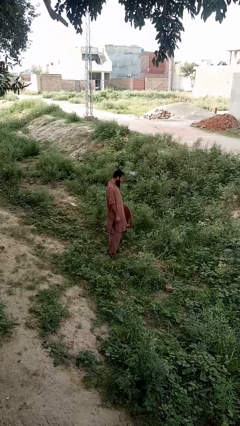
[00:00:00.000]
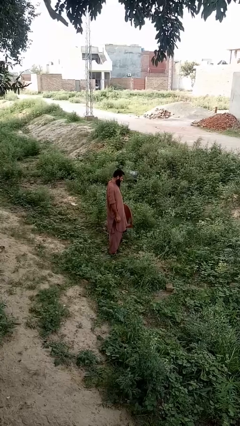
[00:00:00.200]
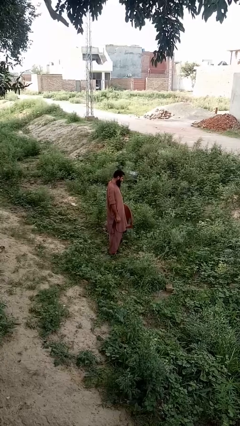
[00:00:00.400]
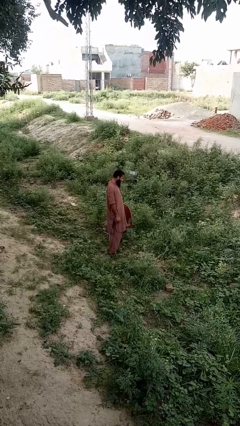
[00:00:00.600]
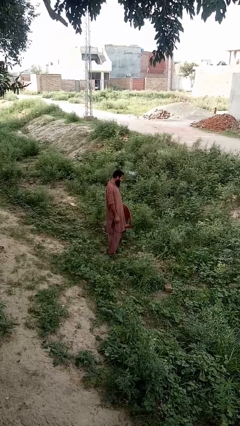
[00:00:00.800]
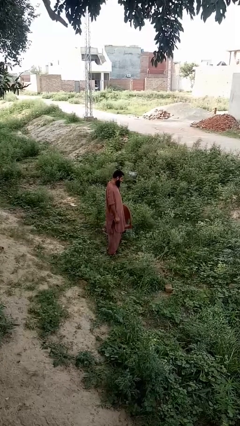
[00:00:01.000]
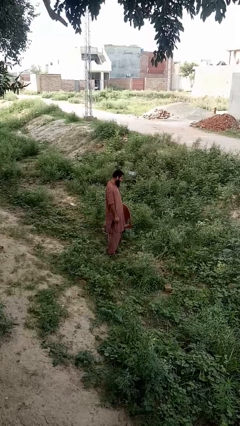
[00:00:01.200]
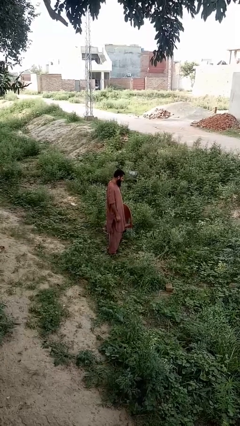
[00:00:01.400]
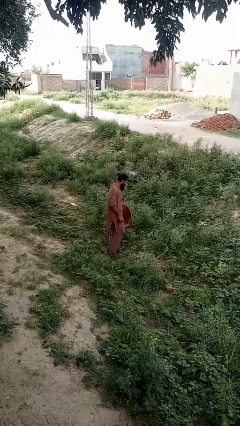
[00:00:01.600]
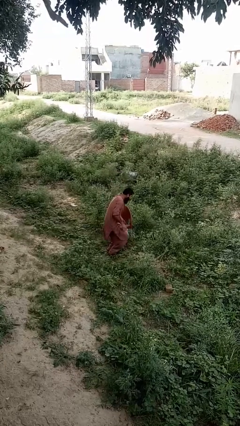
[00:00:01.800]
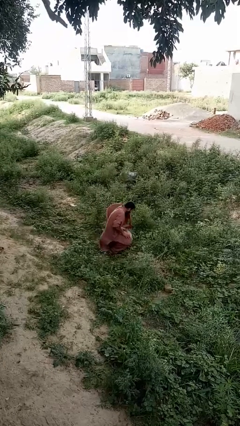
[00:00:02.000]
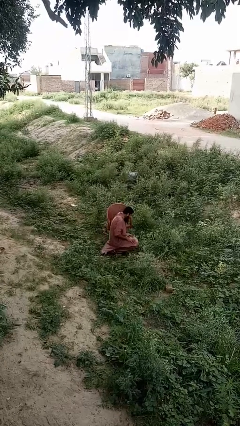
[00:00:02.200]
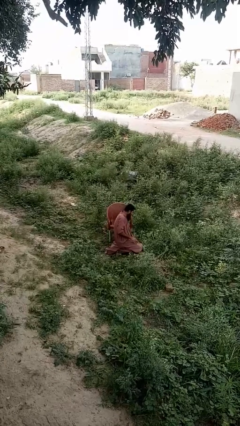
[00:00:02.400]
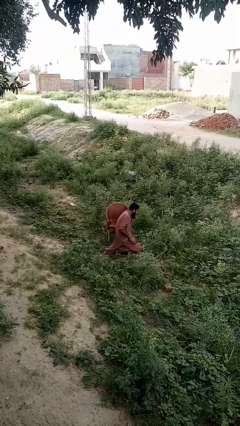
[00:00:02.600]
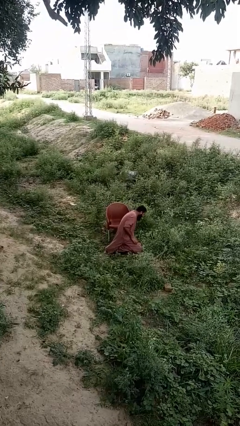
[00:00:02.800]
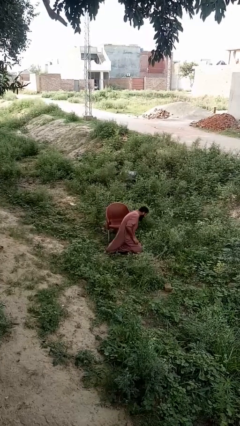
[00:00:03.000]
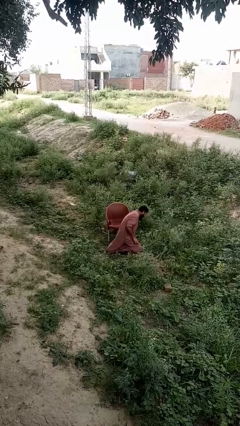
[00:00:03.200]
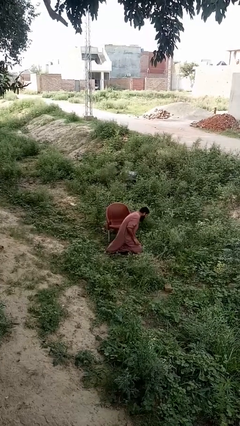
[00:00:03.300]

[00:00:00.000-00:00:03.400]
person falls from chair

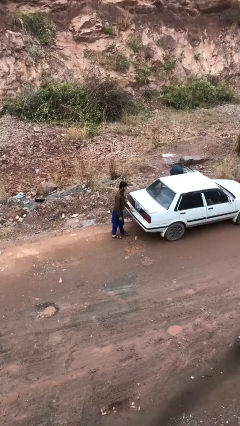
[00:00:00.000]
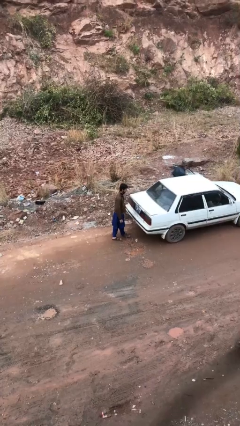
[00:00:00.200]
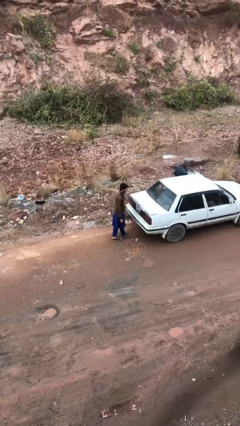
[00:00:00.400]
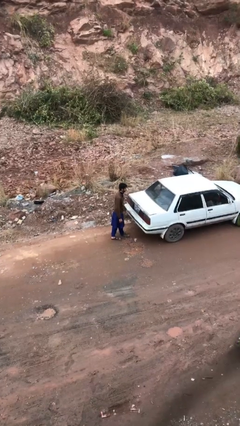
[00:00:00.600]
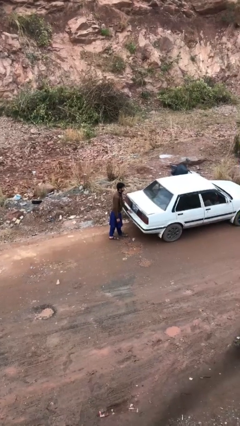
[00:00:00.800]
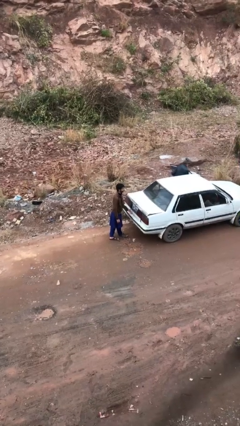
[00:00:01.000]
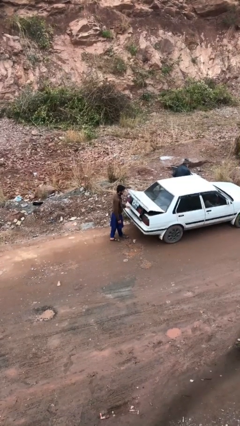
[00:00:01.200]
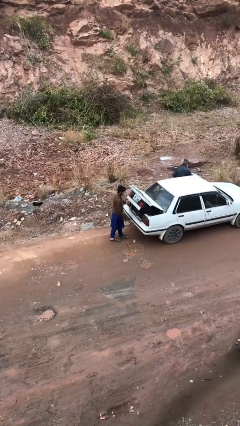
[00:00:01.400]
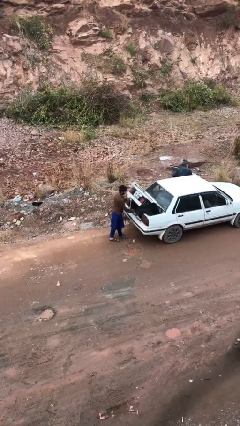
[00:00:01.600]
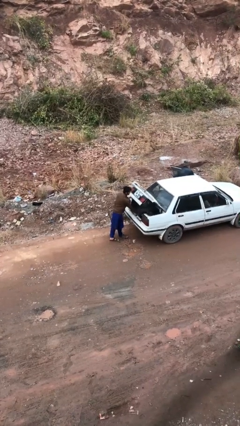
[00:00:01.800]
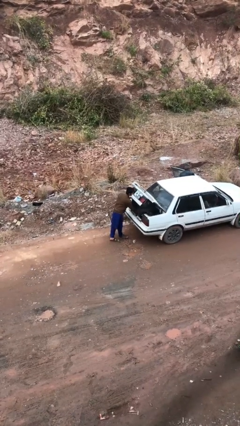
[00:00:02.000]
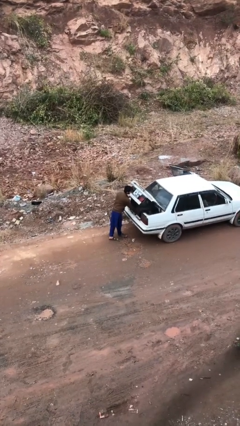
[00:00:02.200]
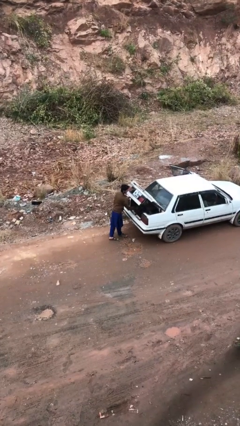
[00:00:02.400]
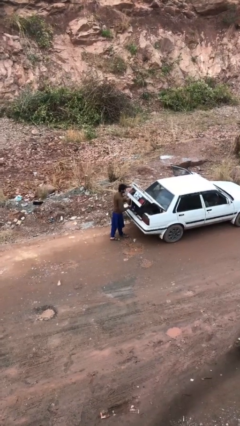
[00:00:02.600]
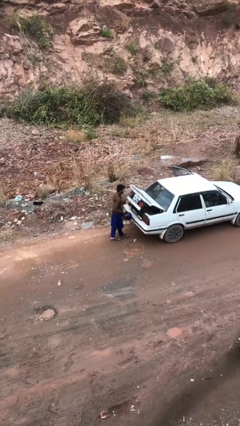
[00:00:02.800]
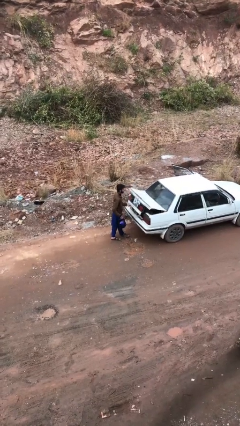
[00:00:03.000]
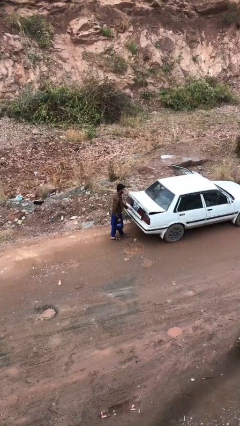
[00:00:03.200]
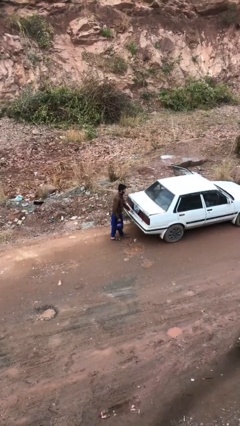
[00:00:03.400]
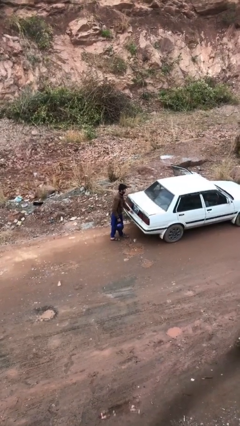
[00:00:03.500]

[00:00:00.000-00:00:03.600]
person unloads car

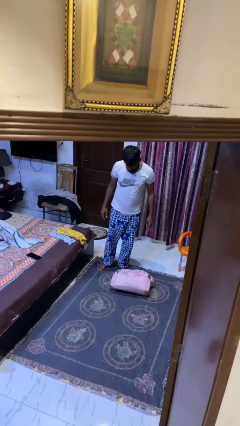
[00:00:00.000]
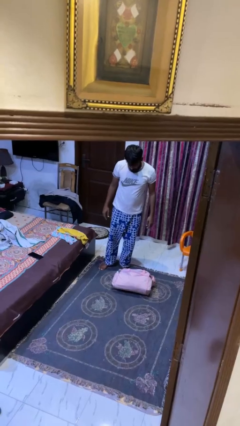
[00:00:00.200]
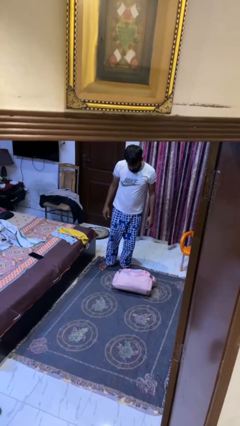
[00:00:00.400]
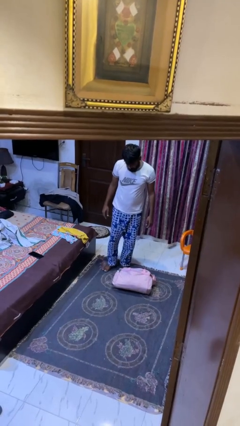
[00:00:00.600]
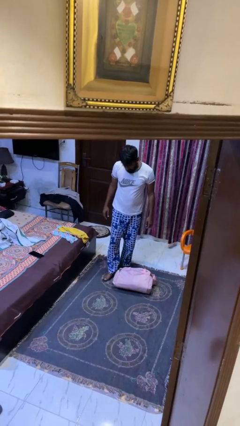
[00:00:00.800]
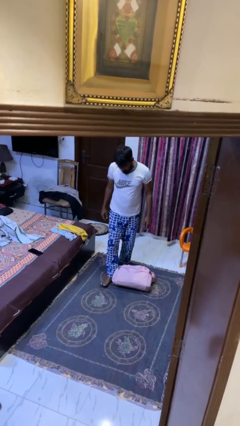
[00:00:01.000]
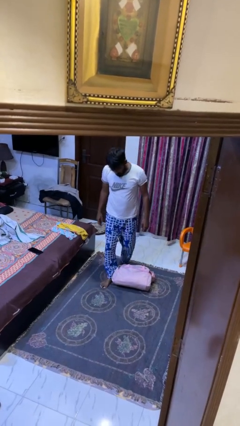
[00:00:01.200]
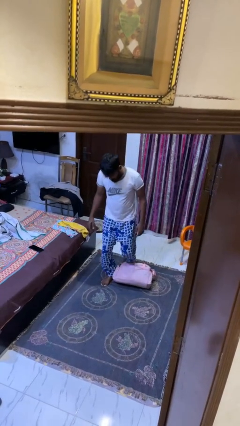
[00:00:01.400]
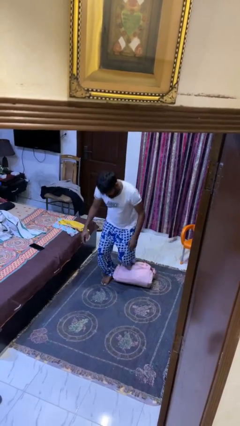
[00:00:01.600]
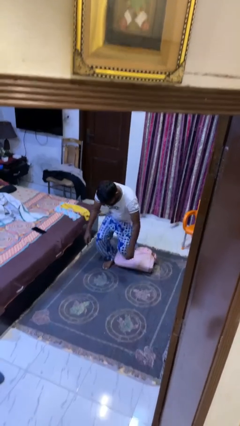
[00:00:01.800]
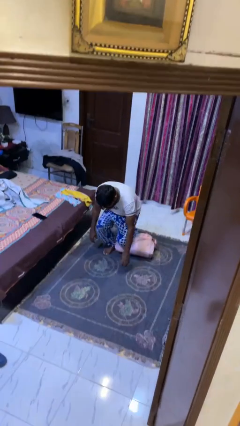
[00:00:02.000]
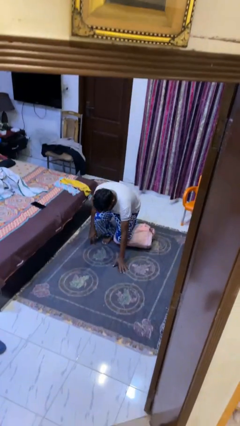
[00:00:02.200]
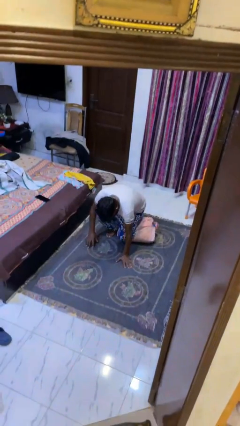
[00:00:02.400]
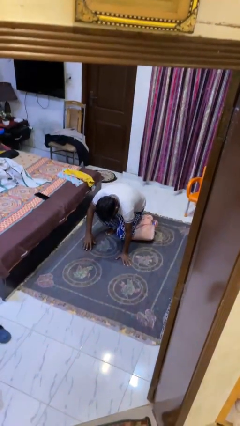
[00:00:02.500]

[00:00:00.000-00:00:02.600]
person trips on object on floor

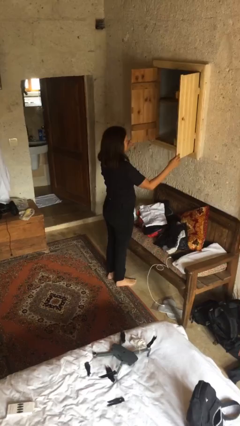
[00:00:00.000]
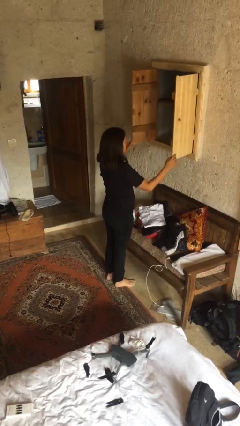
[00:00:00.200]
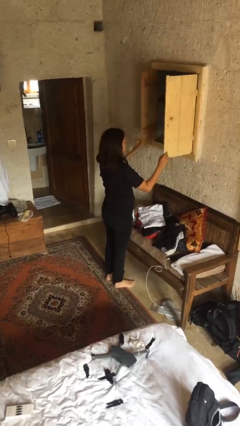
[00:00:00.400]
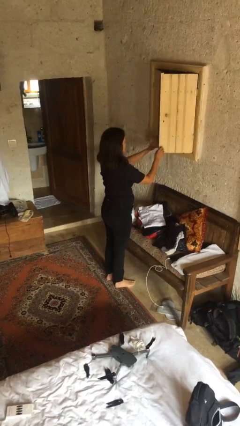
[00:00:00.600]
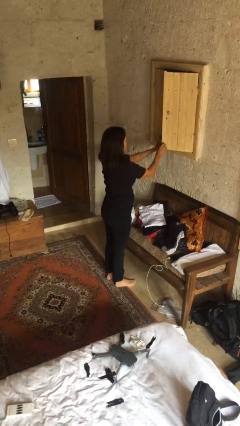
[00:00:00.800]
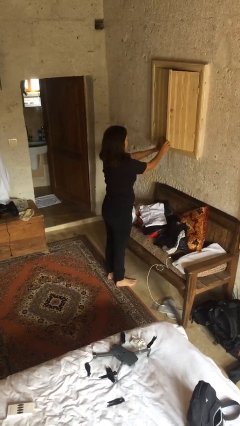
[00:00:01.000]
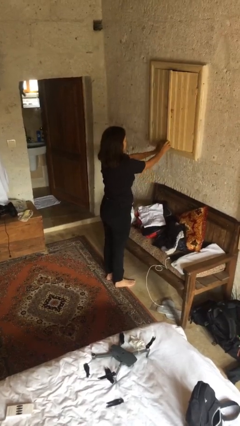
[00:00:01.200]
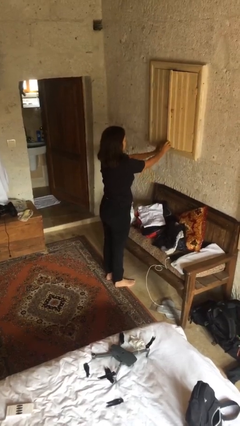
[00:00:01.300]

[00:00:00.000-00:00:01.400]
person closes dresser drawer

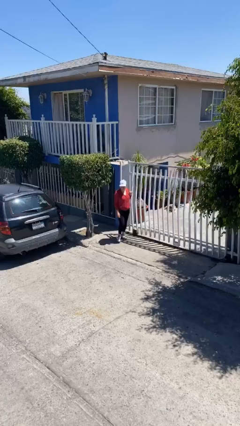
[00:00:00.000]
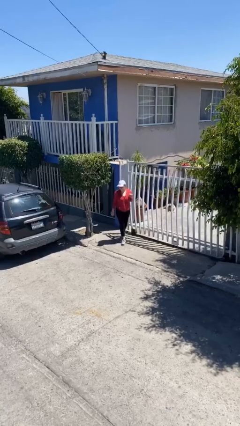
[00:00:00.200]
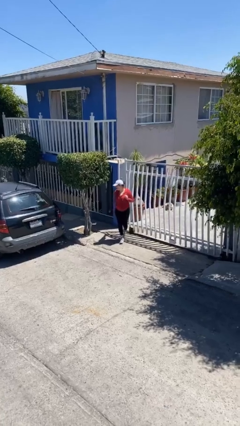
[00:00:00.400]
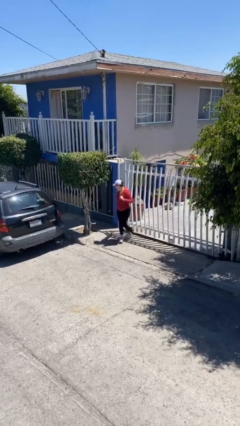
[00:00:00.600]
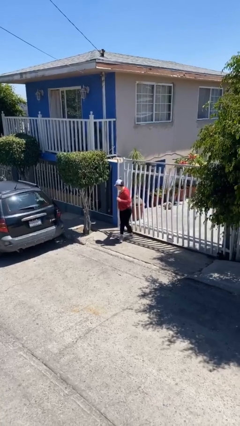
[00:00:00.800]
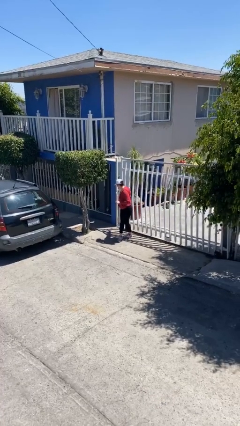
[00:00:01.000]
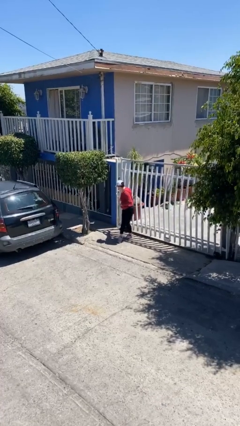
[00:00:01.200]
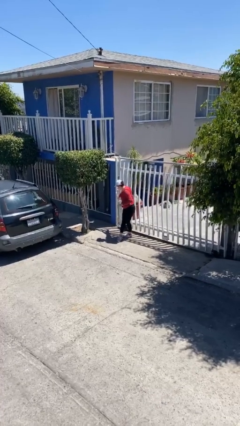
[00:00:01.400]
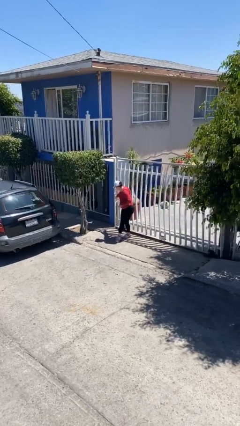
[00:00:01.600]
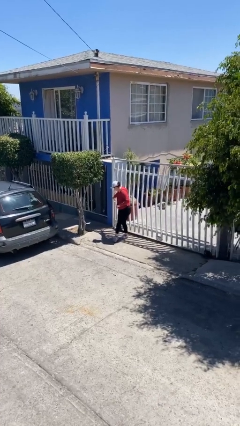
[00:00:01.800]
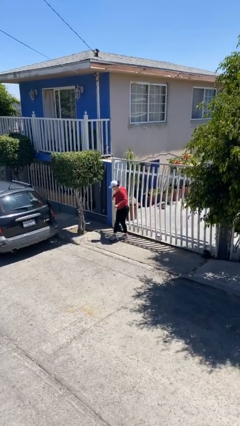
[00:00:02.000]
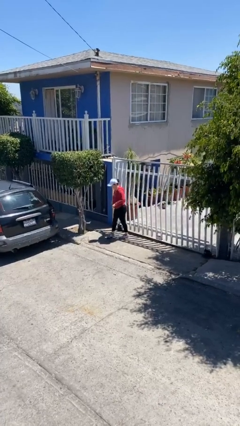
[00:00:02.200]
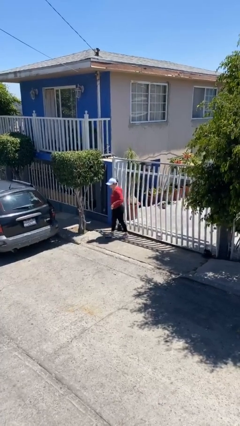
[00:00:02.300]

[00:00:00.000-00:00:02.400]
person closes facility door

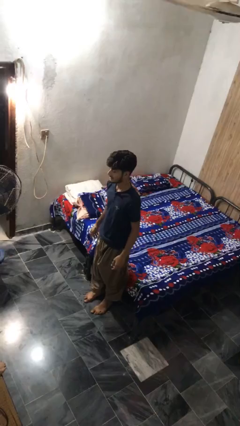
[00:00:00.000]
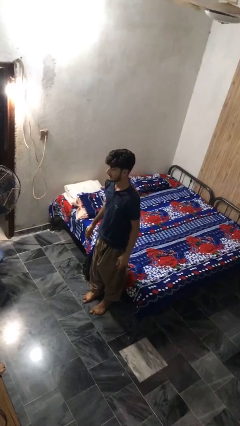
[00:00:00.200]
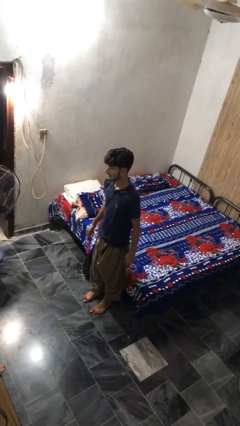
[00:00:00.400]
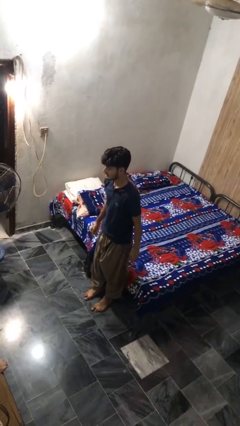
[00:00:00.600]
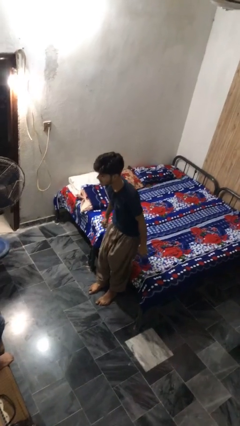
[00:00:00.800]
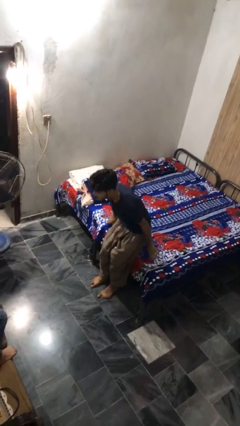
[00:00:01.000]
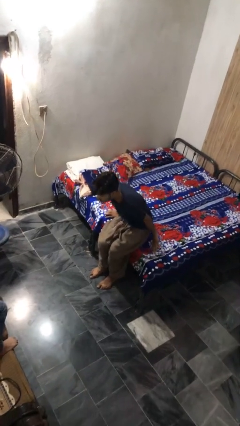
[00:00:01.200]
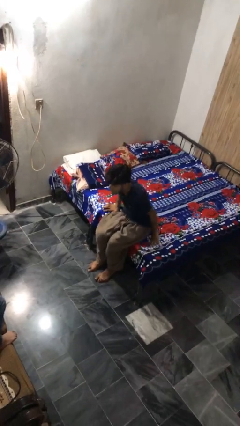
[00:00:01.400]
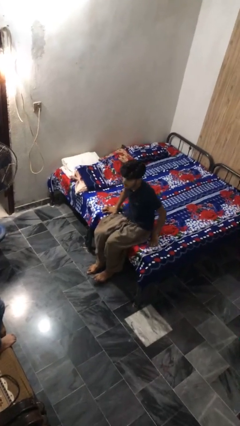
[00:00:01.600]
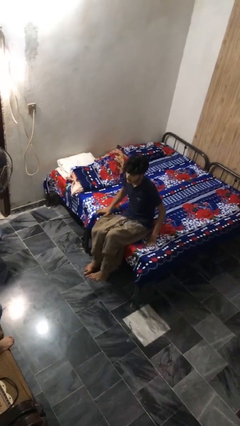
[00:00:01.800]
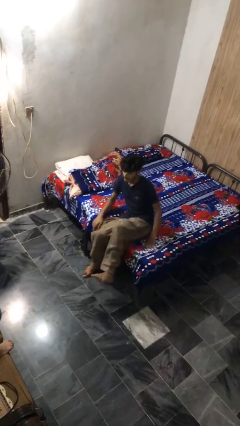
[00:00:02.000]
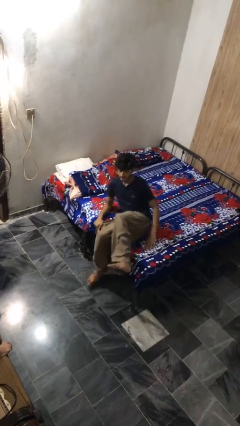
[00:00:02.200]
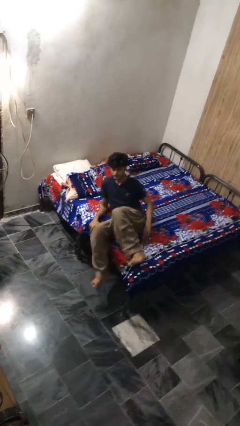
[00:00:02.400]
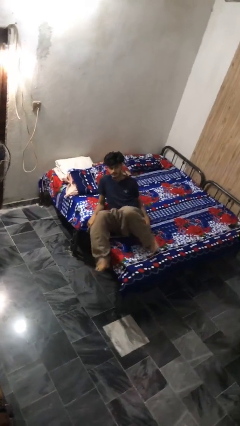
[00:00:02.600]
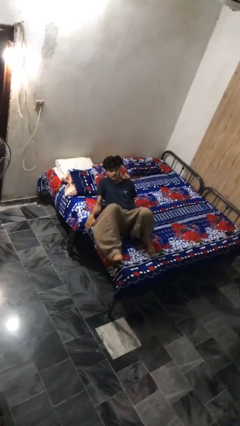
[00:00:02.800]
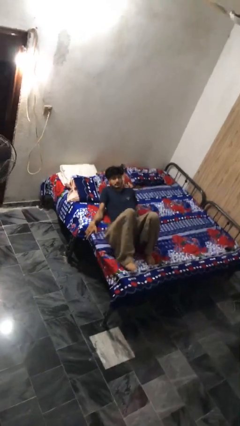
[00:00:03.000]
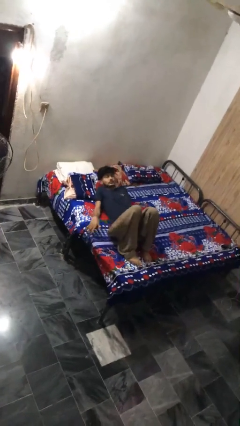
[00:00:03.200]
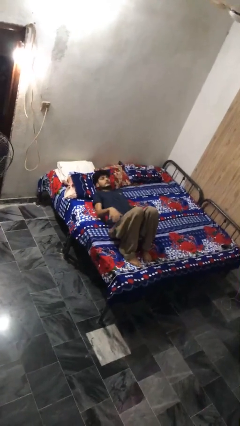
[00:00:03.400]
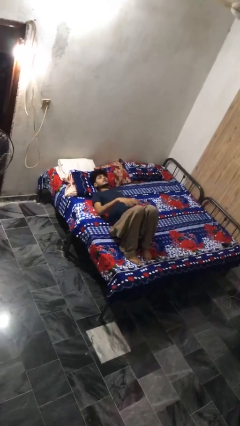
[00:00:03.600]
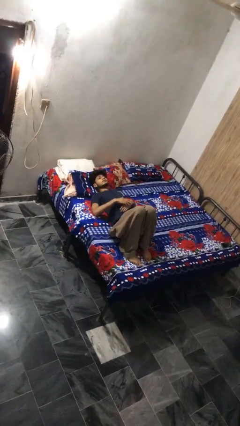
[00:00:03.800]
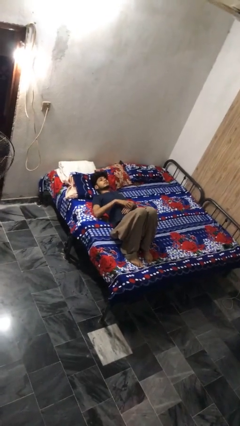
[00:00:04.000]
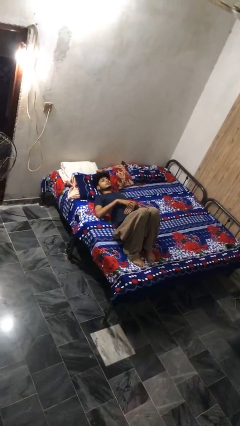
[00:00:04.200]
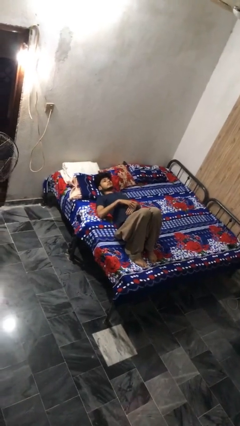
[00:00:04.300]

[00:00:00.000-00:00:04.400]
person lies down on bed
